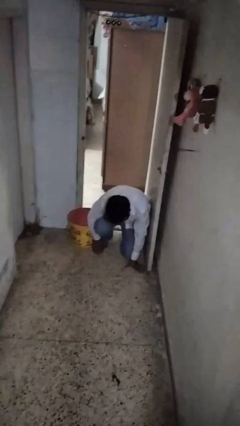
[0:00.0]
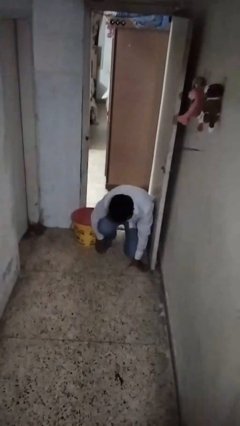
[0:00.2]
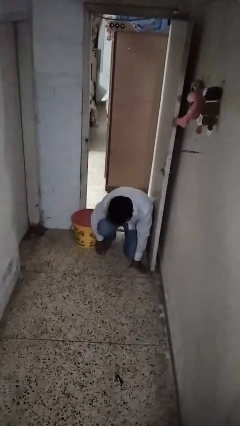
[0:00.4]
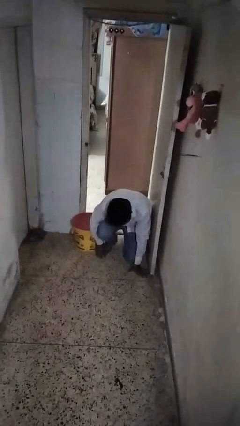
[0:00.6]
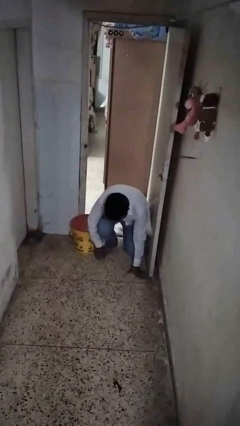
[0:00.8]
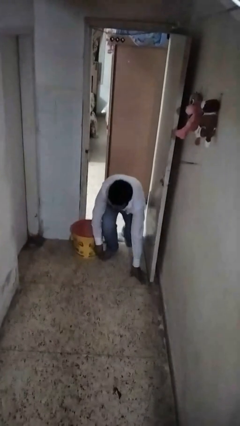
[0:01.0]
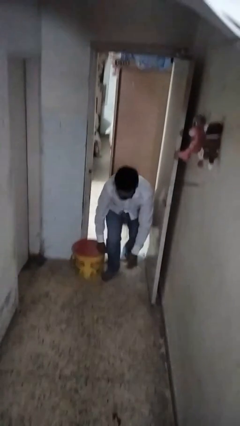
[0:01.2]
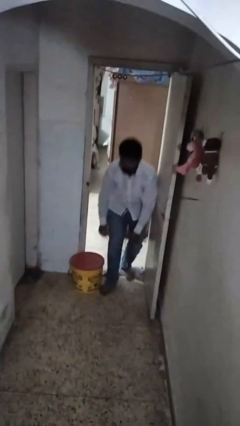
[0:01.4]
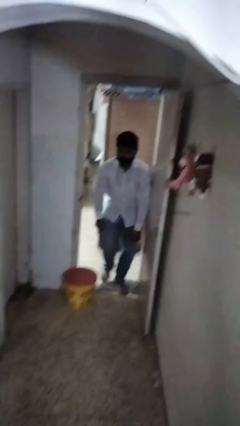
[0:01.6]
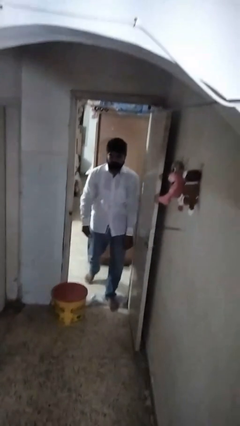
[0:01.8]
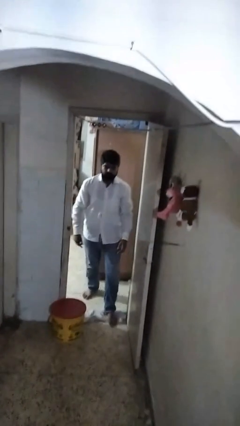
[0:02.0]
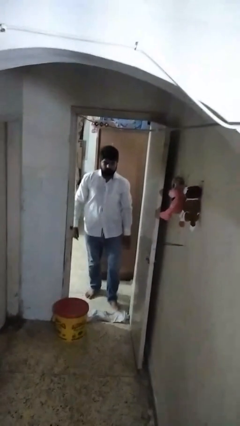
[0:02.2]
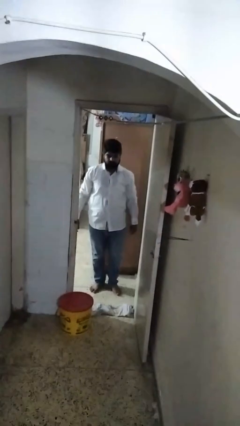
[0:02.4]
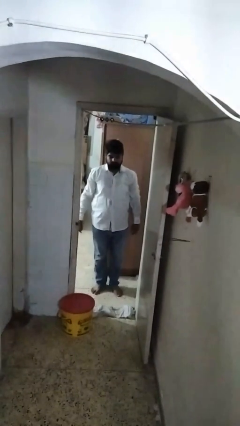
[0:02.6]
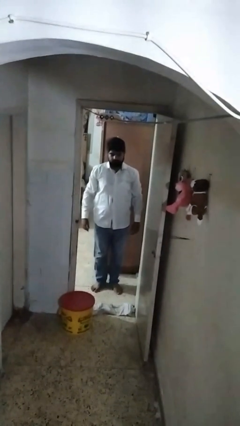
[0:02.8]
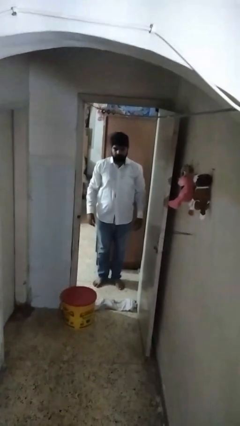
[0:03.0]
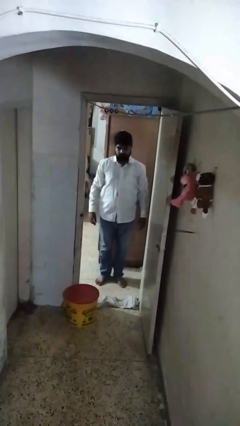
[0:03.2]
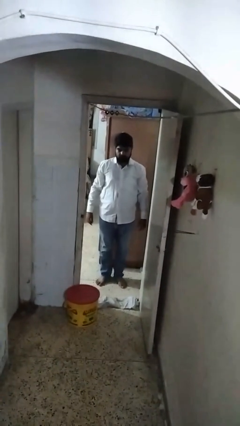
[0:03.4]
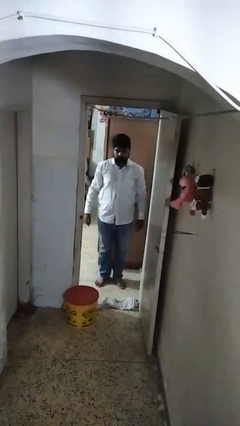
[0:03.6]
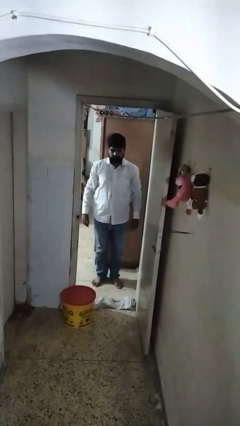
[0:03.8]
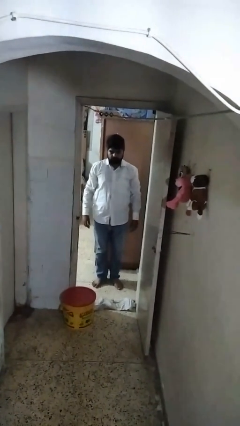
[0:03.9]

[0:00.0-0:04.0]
person stands up from floor

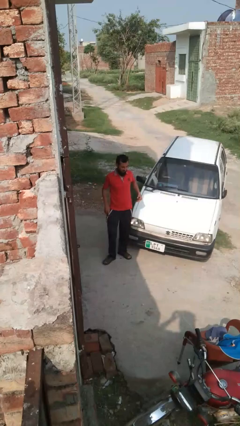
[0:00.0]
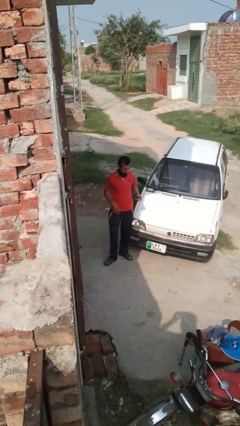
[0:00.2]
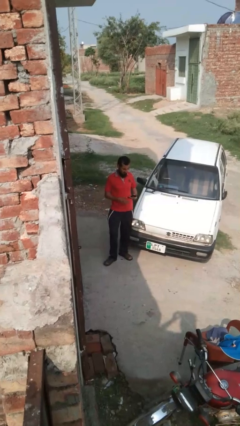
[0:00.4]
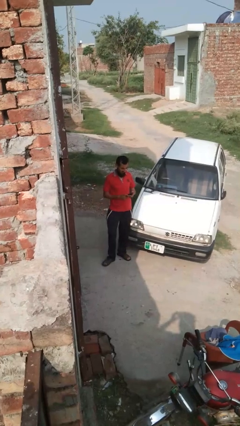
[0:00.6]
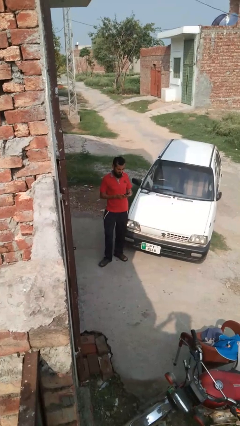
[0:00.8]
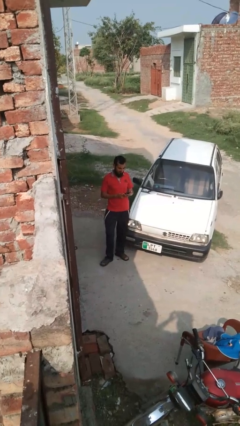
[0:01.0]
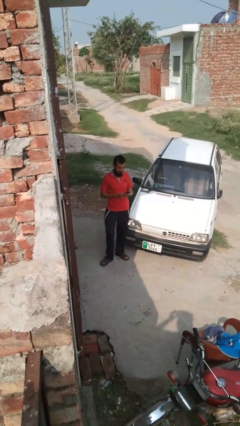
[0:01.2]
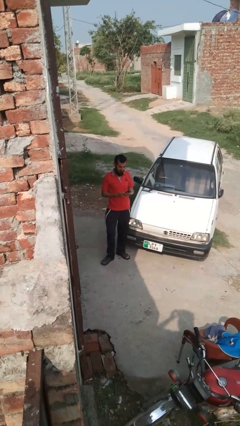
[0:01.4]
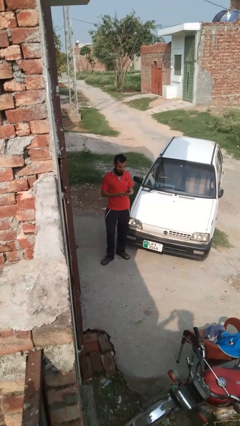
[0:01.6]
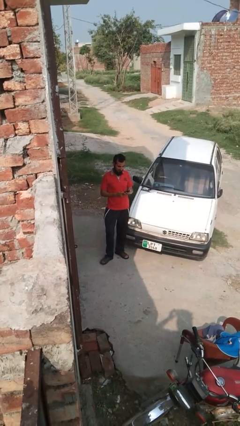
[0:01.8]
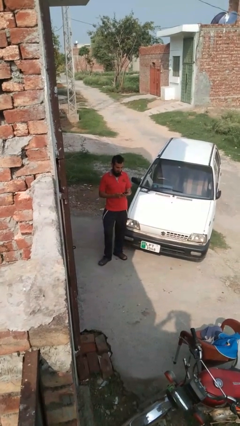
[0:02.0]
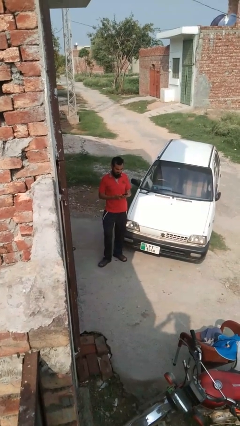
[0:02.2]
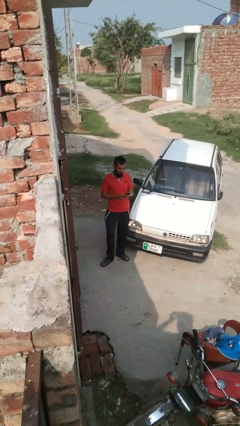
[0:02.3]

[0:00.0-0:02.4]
person takes phone from pocket

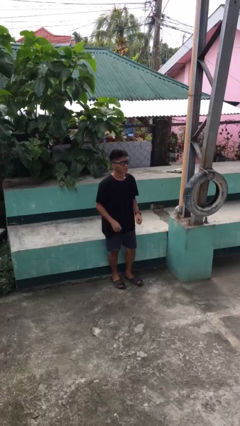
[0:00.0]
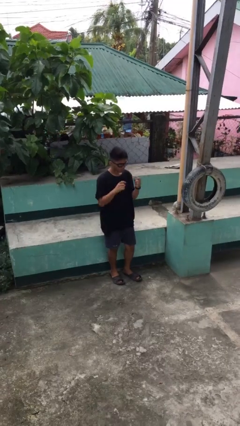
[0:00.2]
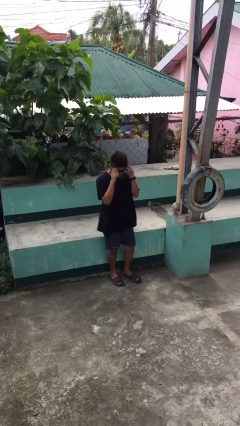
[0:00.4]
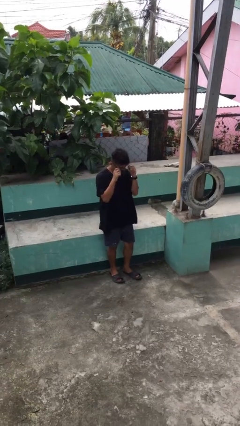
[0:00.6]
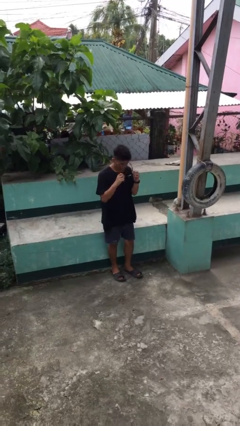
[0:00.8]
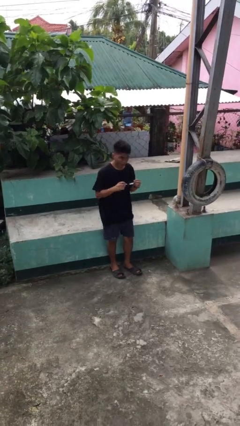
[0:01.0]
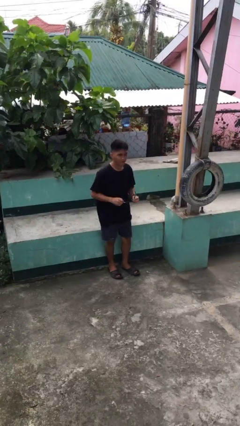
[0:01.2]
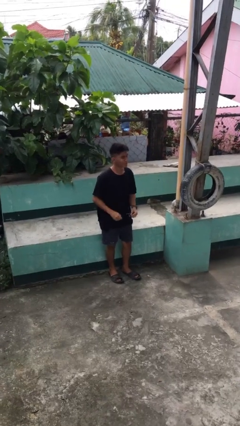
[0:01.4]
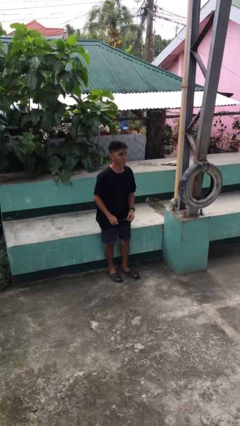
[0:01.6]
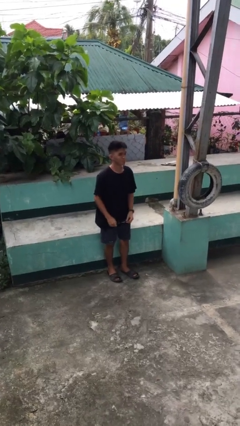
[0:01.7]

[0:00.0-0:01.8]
person takes off sunglasses

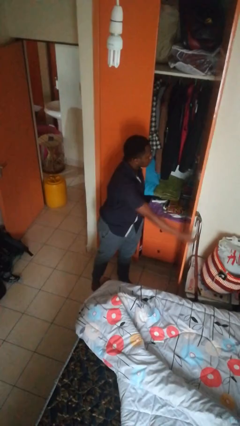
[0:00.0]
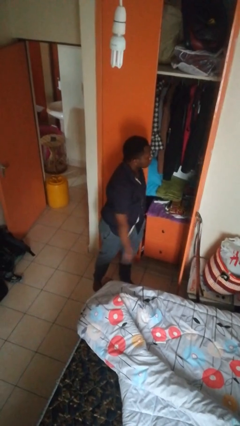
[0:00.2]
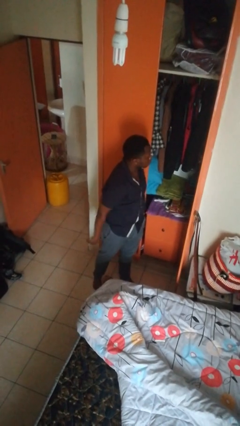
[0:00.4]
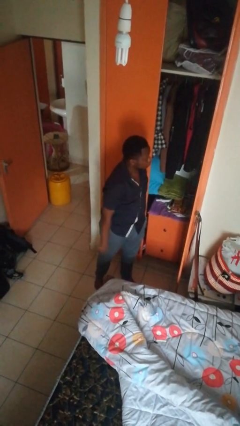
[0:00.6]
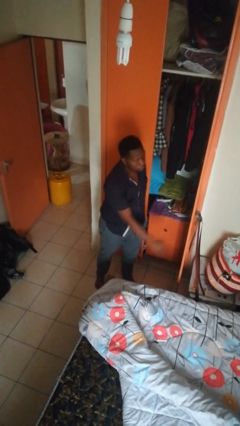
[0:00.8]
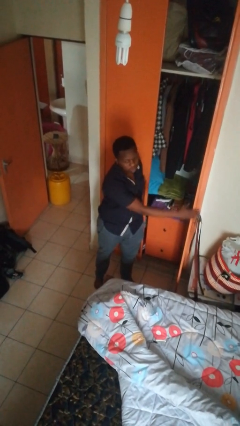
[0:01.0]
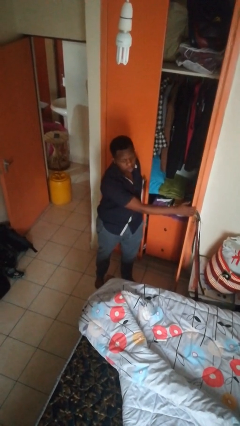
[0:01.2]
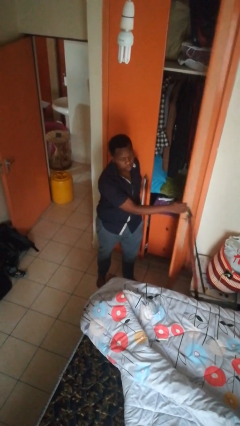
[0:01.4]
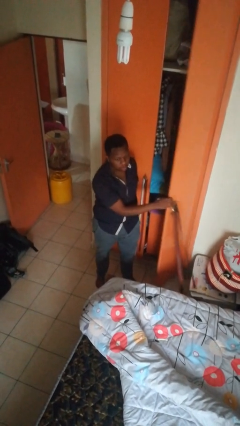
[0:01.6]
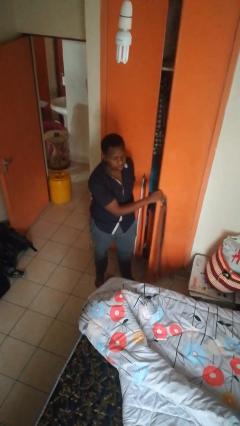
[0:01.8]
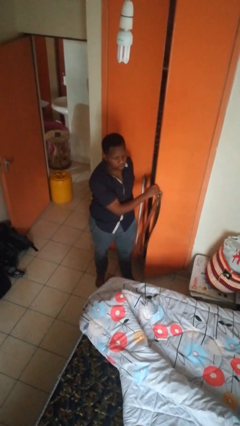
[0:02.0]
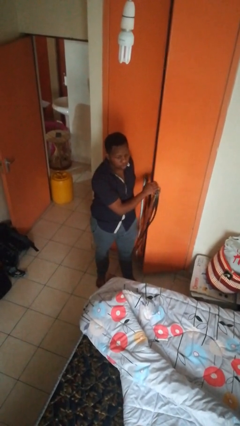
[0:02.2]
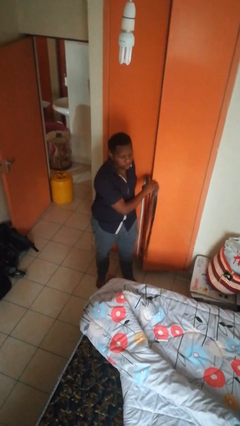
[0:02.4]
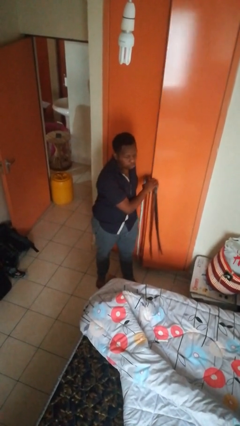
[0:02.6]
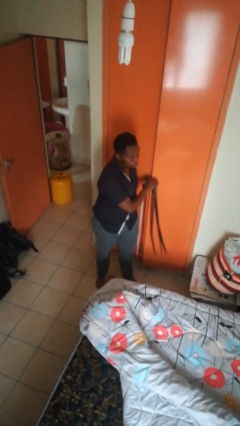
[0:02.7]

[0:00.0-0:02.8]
person closes closet door

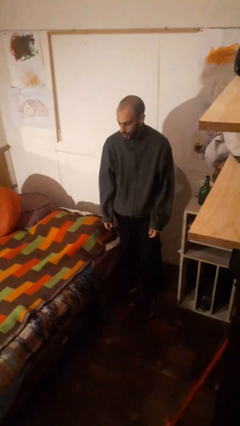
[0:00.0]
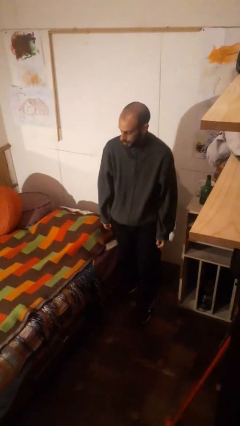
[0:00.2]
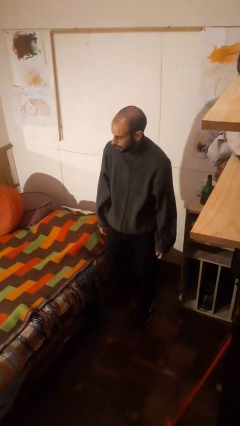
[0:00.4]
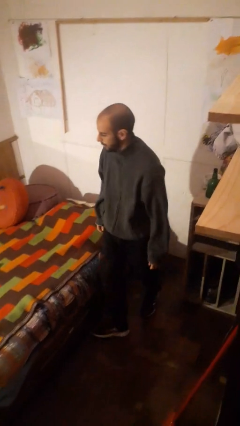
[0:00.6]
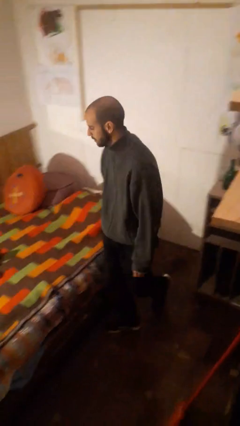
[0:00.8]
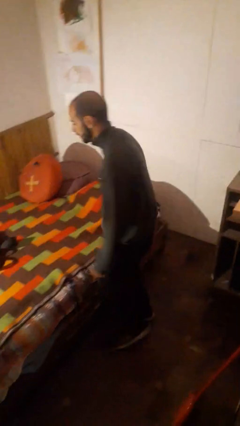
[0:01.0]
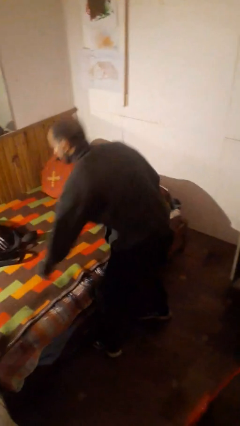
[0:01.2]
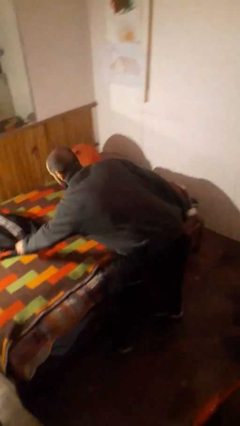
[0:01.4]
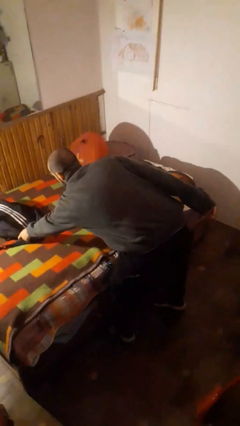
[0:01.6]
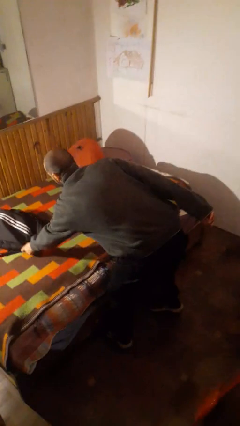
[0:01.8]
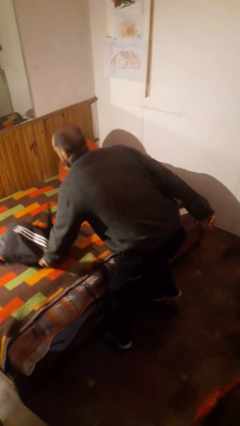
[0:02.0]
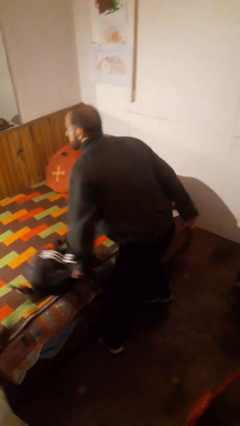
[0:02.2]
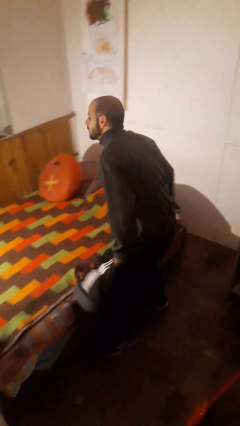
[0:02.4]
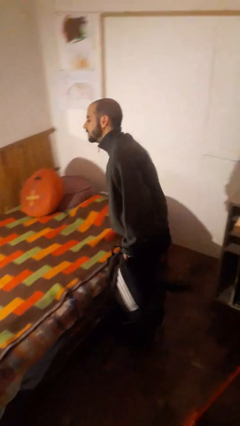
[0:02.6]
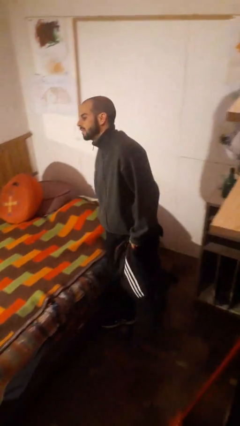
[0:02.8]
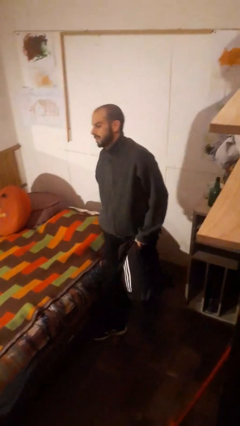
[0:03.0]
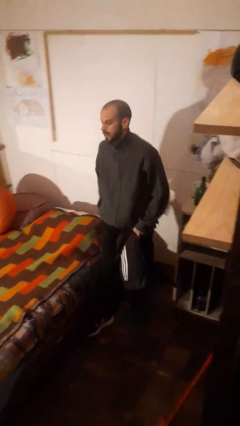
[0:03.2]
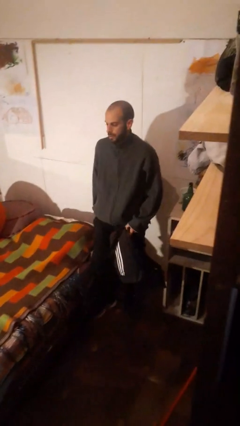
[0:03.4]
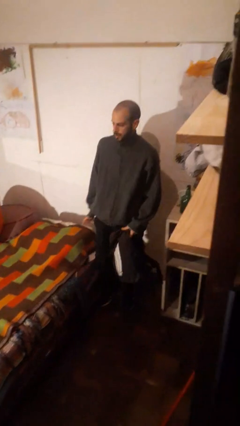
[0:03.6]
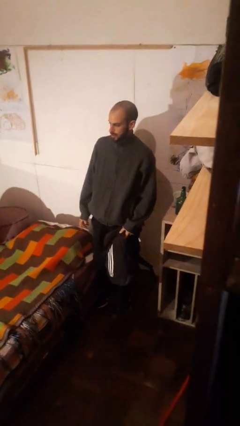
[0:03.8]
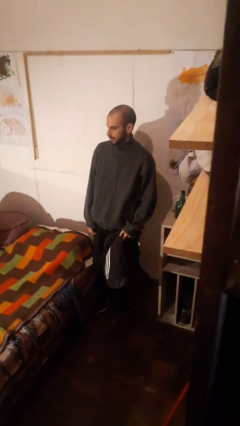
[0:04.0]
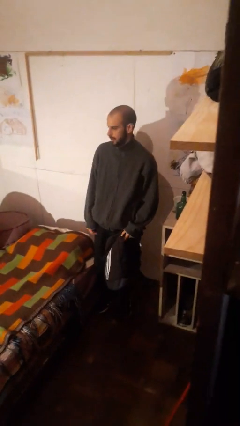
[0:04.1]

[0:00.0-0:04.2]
person picks up object from bed

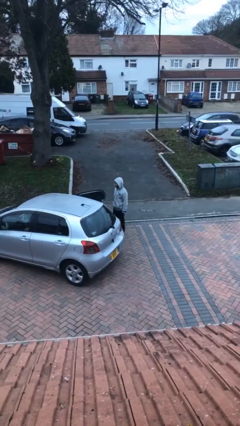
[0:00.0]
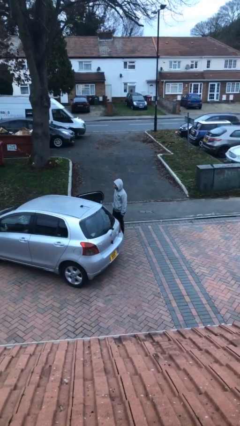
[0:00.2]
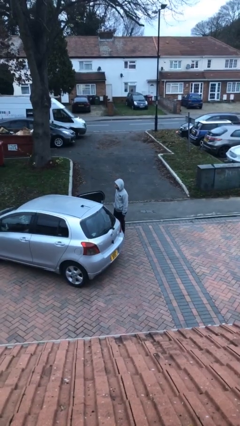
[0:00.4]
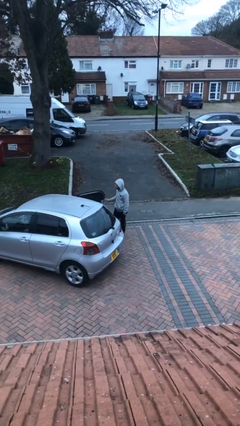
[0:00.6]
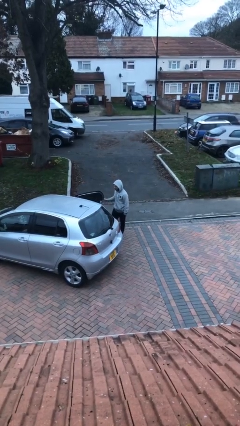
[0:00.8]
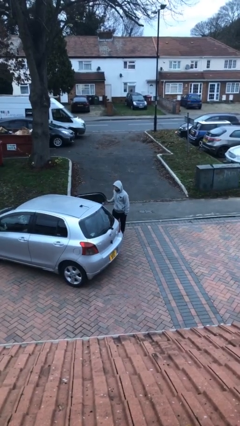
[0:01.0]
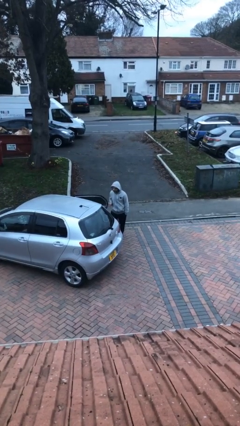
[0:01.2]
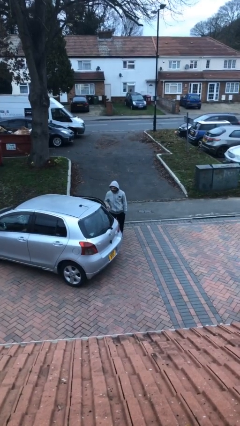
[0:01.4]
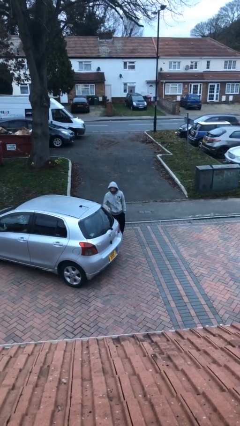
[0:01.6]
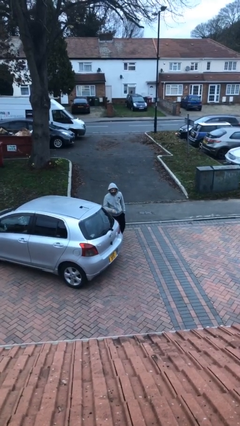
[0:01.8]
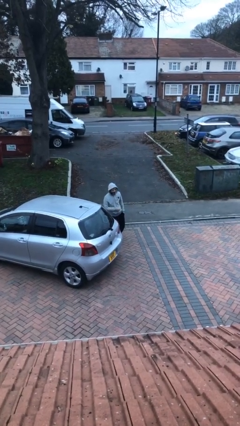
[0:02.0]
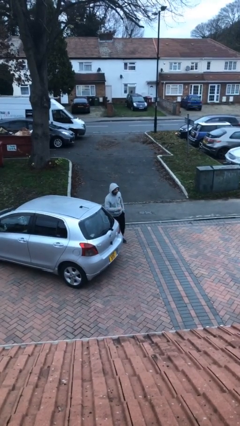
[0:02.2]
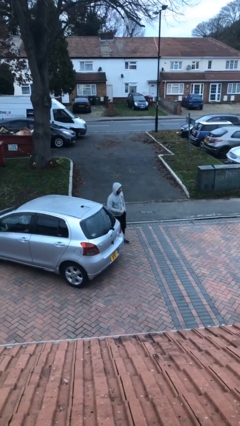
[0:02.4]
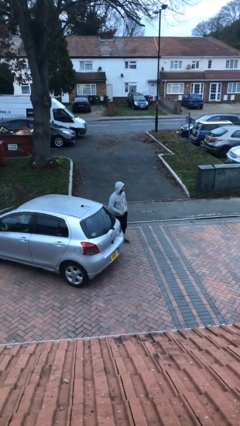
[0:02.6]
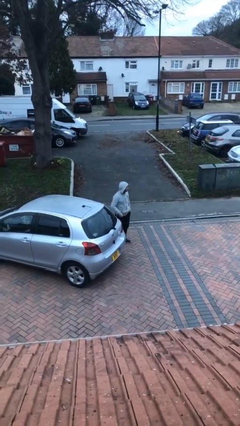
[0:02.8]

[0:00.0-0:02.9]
person closes car door
